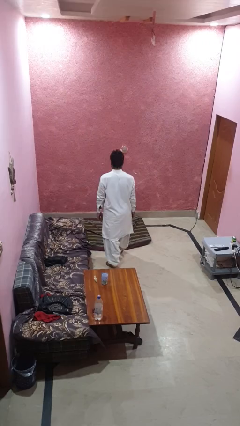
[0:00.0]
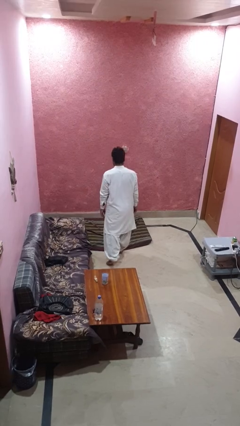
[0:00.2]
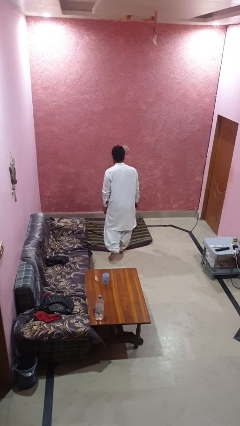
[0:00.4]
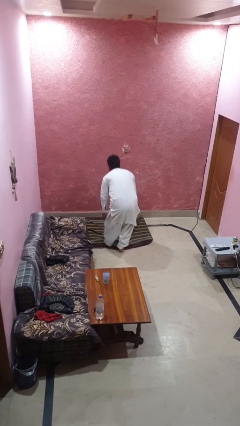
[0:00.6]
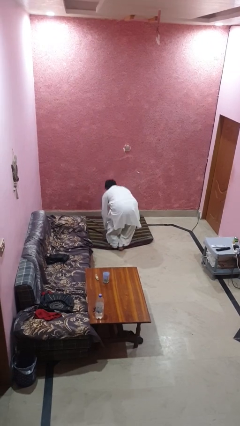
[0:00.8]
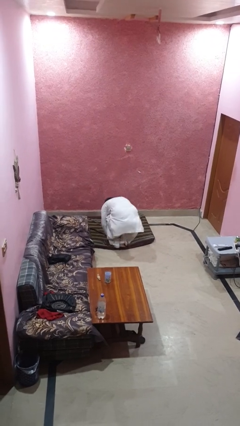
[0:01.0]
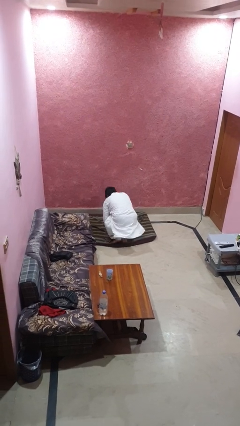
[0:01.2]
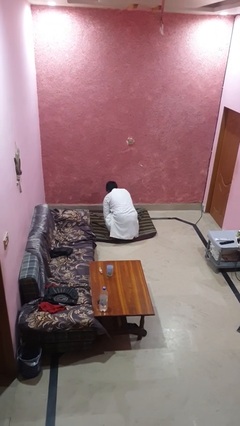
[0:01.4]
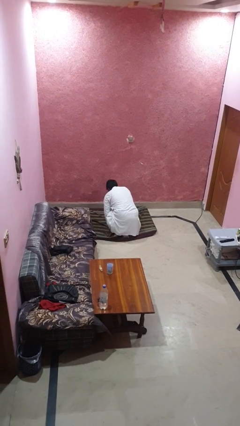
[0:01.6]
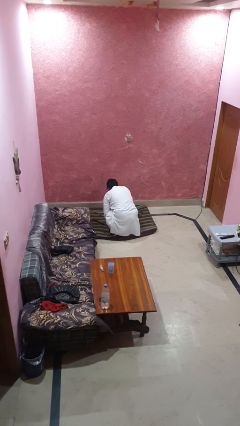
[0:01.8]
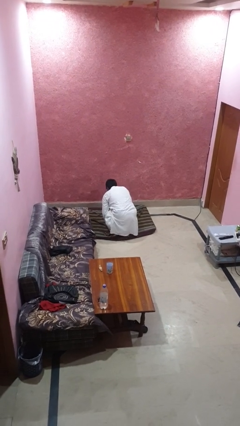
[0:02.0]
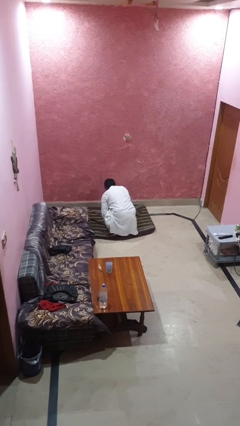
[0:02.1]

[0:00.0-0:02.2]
person trips on object on floor

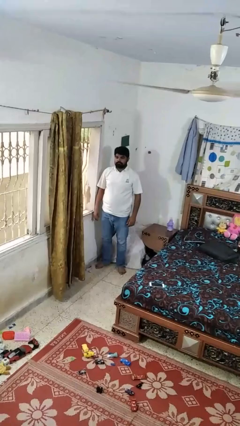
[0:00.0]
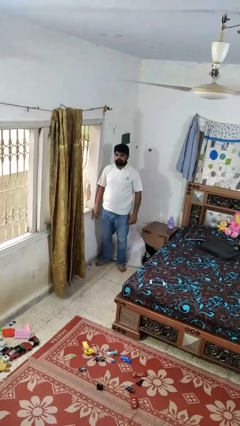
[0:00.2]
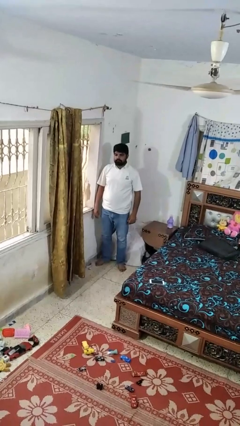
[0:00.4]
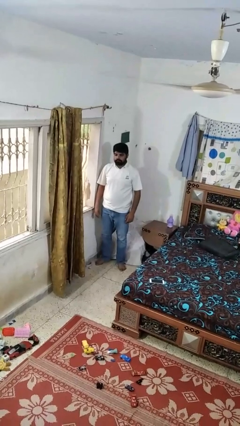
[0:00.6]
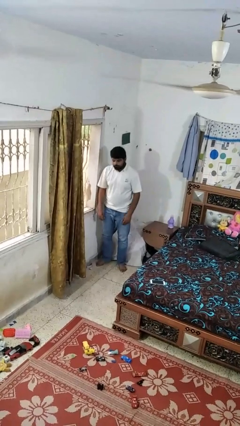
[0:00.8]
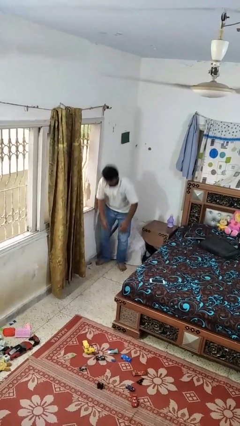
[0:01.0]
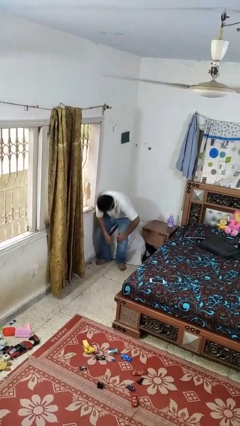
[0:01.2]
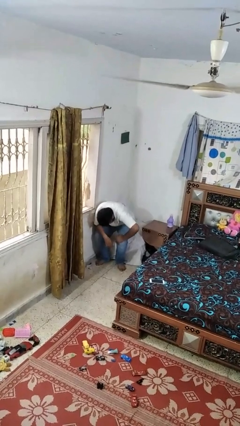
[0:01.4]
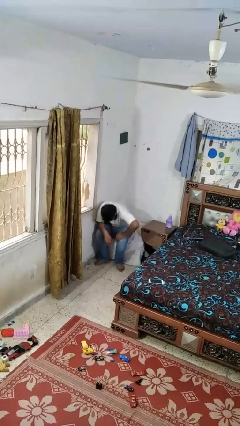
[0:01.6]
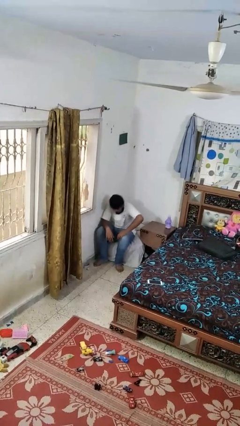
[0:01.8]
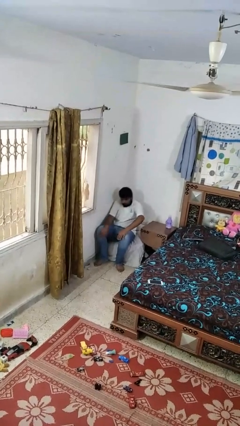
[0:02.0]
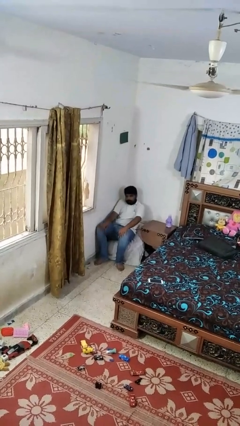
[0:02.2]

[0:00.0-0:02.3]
person lies down on couch

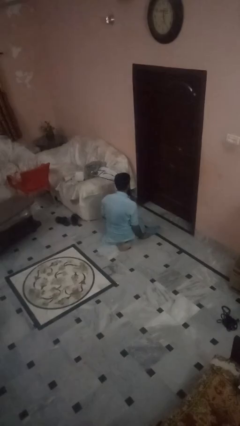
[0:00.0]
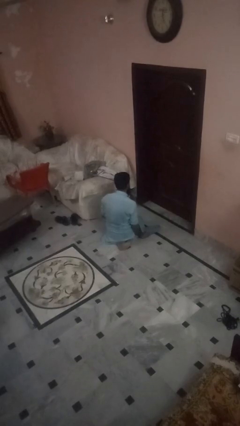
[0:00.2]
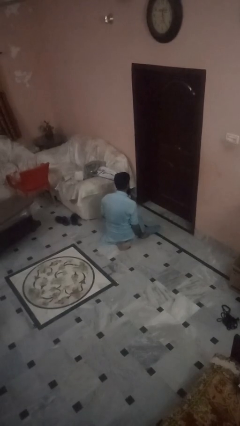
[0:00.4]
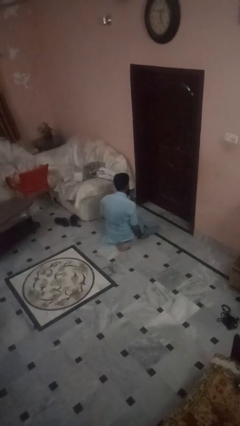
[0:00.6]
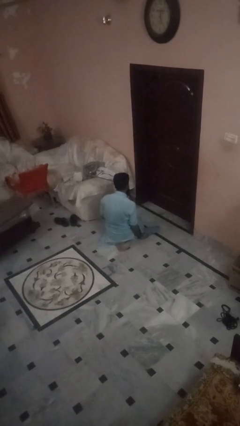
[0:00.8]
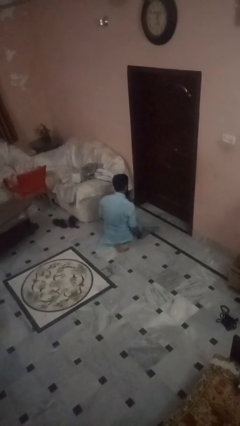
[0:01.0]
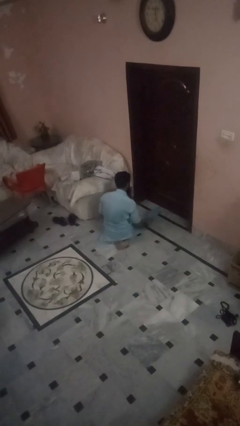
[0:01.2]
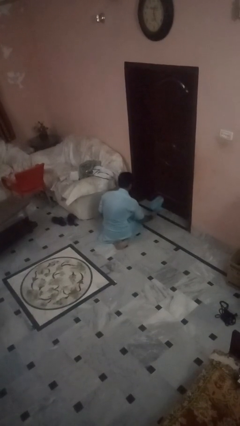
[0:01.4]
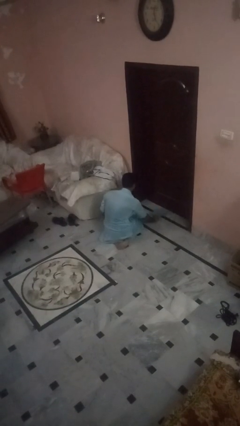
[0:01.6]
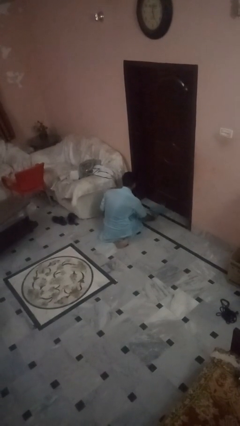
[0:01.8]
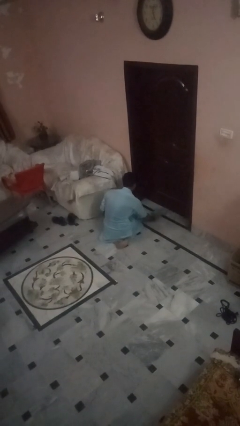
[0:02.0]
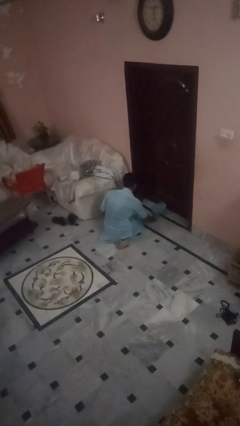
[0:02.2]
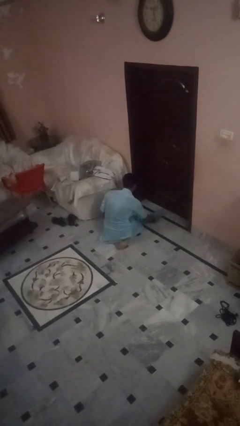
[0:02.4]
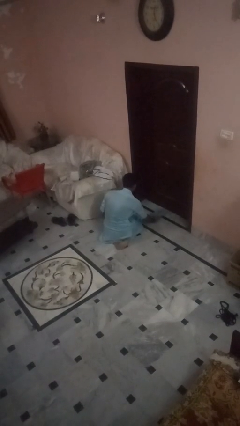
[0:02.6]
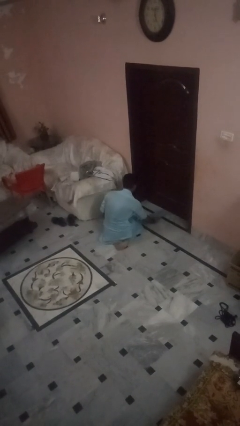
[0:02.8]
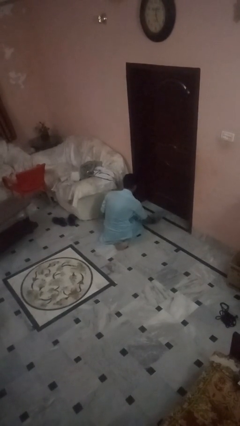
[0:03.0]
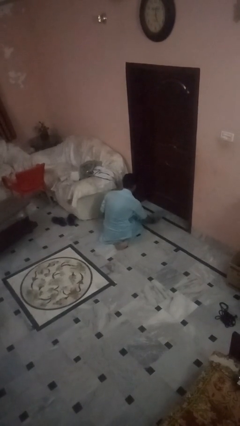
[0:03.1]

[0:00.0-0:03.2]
person swats bug

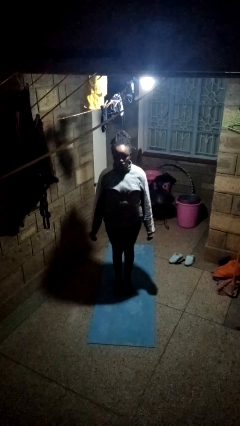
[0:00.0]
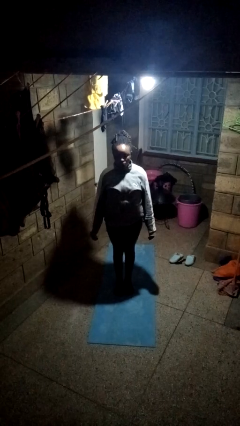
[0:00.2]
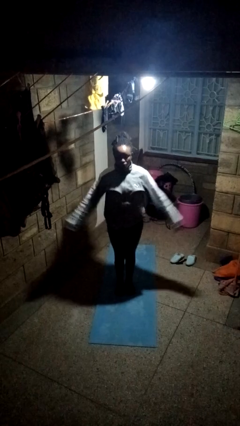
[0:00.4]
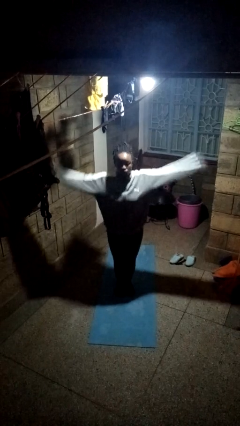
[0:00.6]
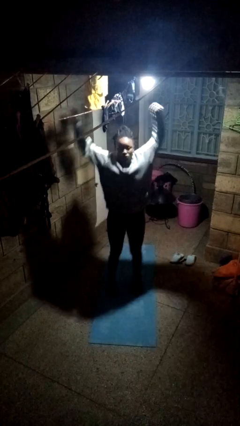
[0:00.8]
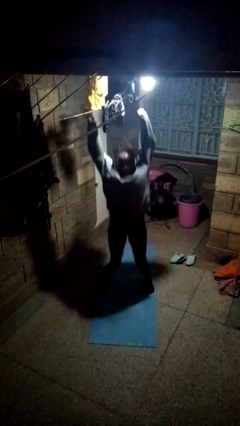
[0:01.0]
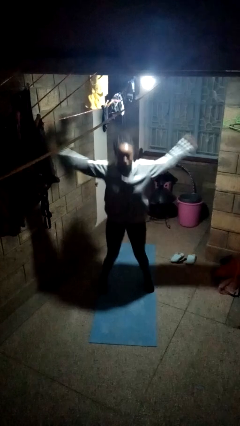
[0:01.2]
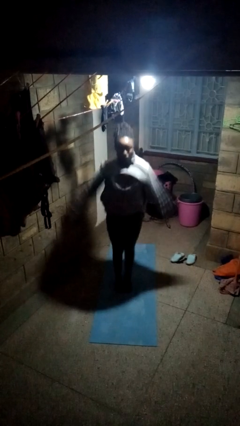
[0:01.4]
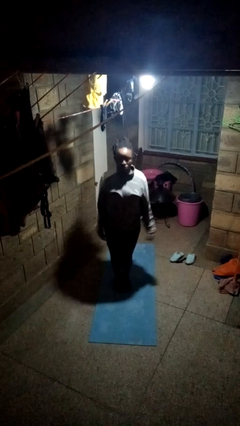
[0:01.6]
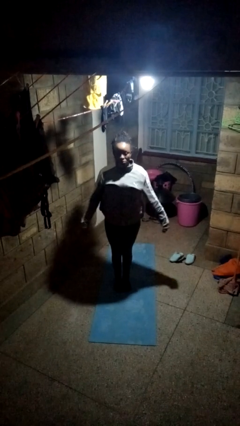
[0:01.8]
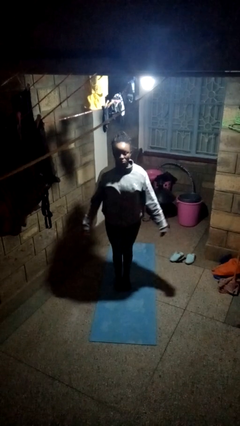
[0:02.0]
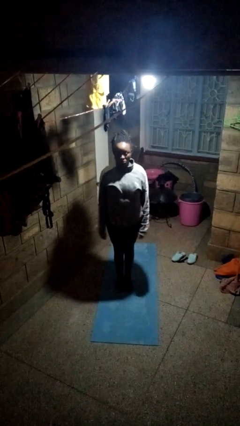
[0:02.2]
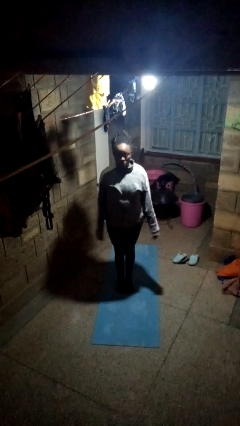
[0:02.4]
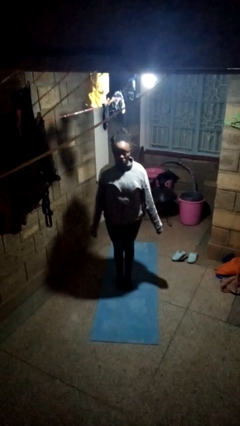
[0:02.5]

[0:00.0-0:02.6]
person exercises with jumping jacks

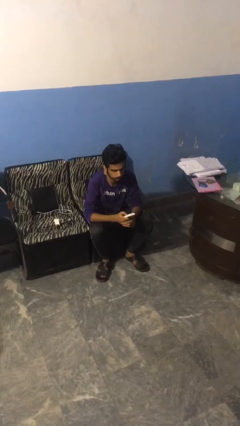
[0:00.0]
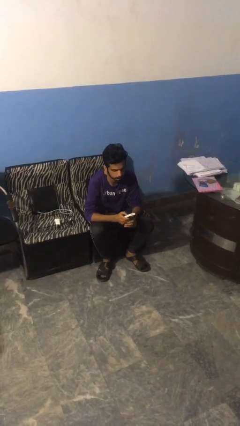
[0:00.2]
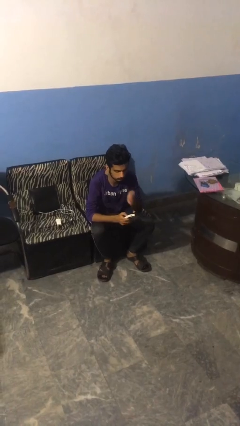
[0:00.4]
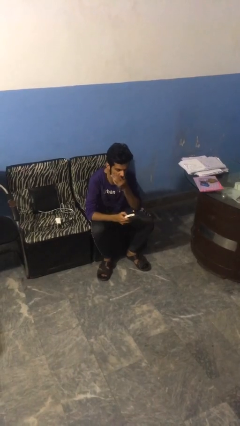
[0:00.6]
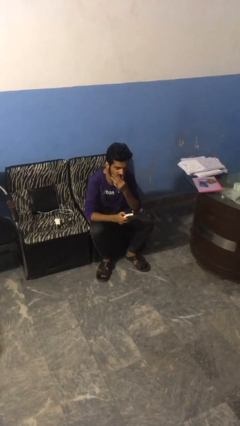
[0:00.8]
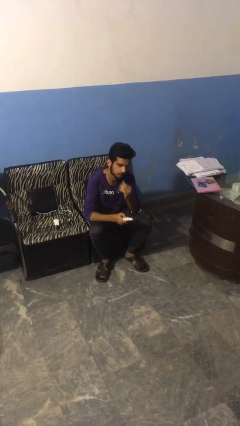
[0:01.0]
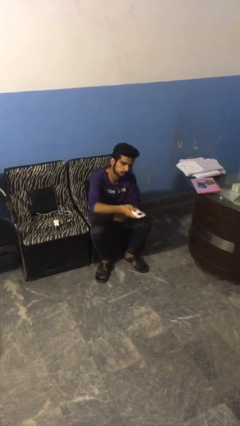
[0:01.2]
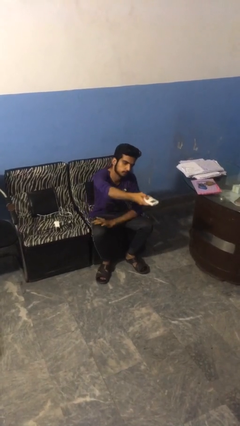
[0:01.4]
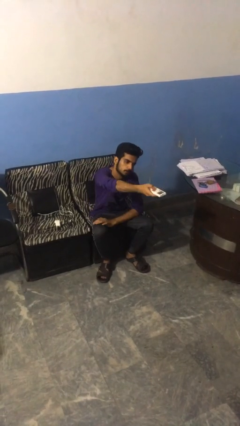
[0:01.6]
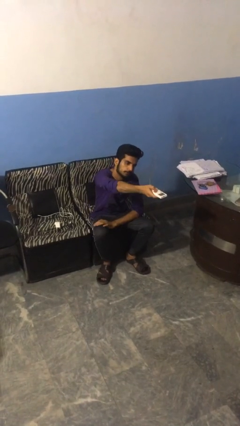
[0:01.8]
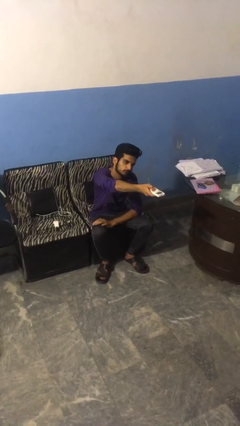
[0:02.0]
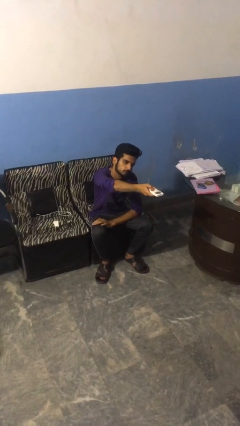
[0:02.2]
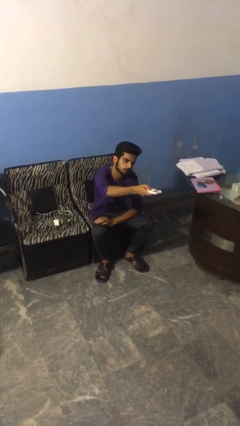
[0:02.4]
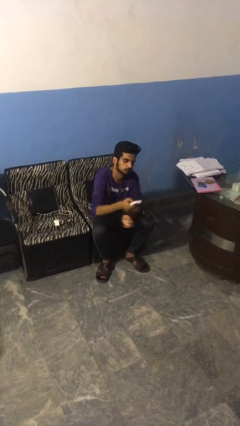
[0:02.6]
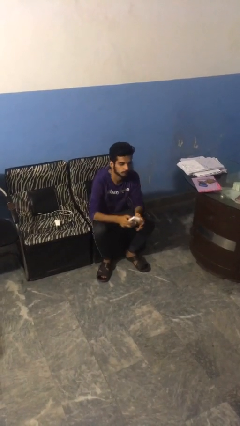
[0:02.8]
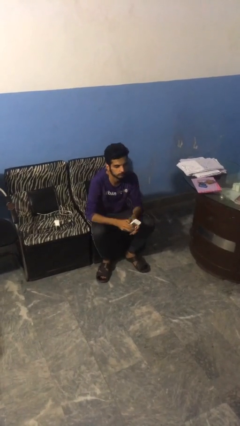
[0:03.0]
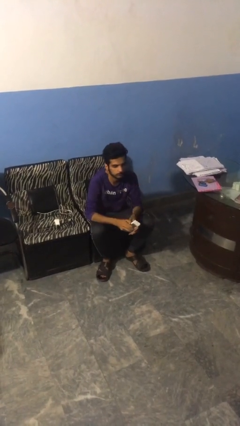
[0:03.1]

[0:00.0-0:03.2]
person uses television remote

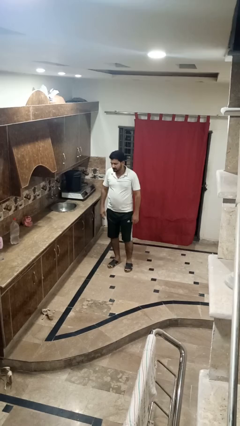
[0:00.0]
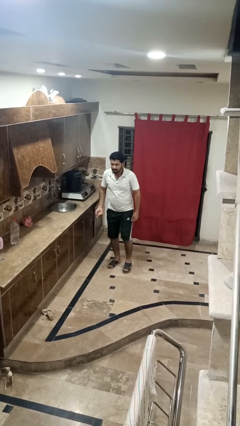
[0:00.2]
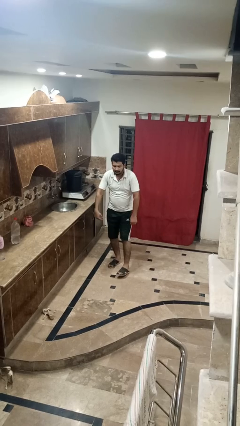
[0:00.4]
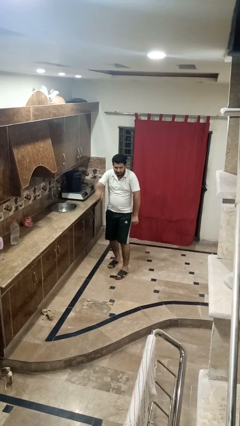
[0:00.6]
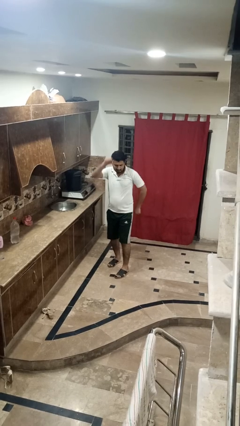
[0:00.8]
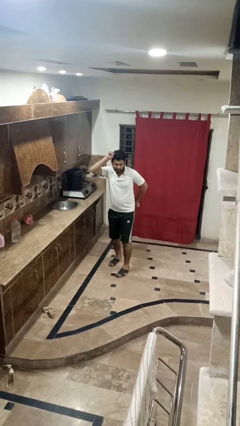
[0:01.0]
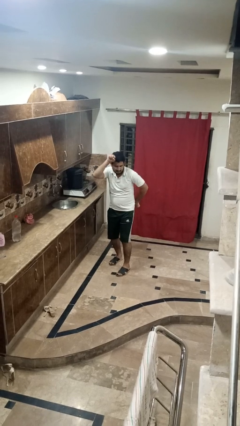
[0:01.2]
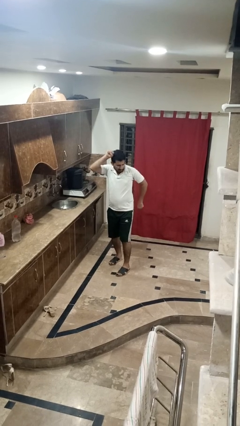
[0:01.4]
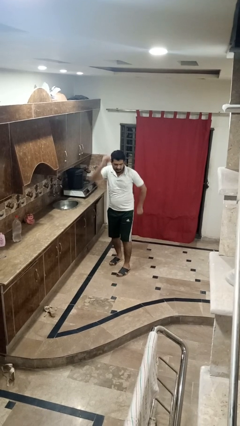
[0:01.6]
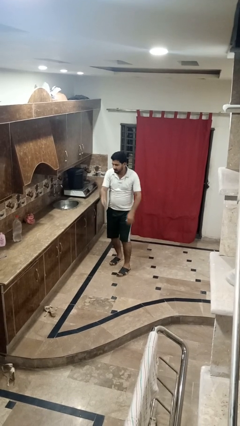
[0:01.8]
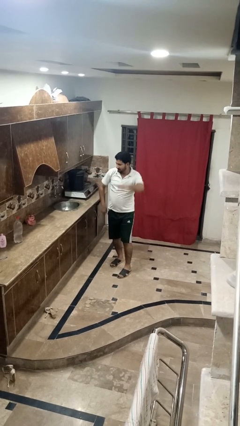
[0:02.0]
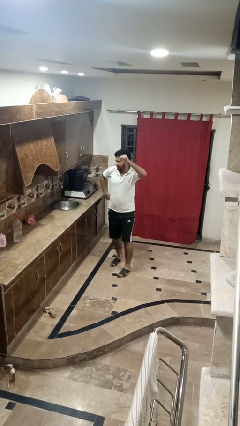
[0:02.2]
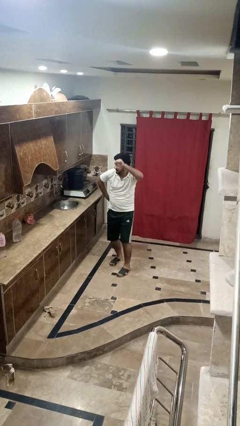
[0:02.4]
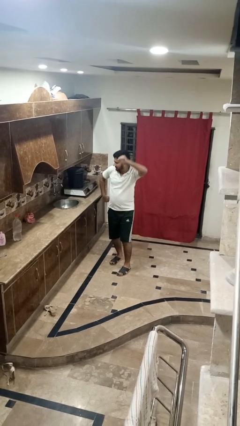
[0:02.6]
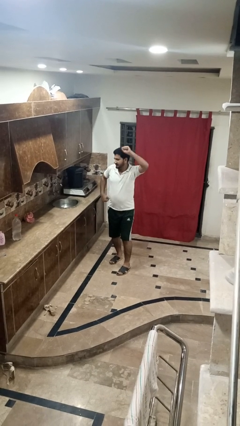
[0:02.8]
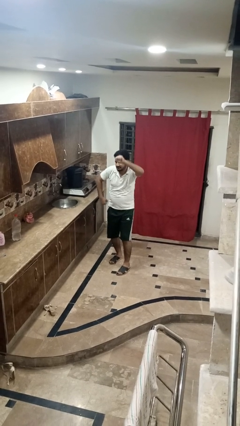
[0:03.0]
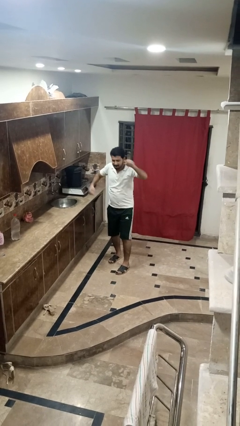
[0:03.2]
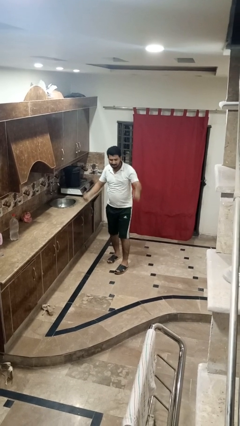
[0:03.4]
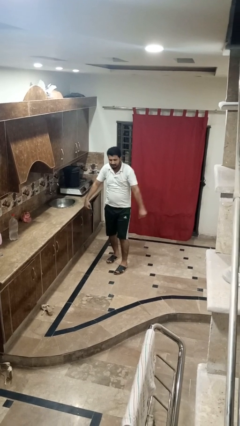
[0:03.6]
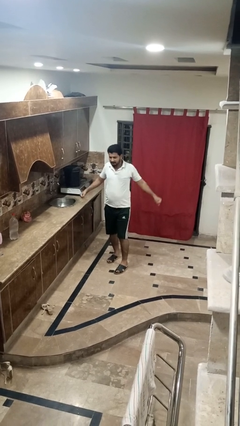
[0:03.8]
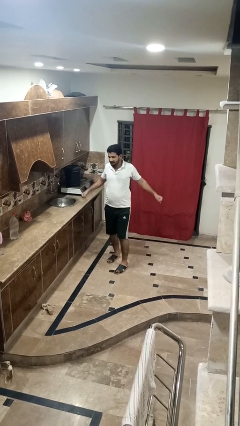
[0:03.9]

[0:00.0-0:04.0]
person dances in place
